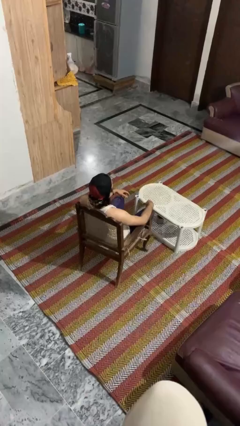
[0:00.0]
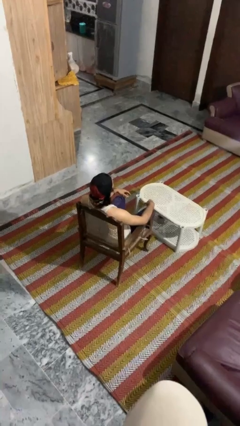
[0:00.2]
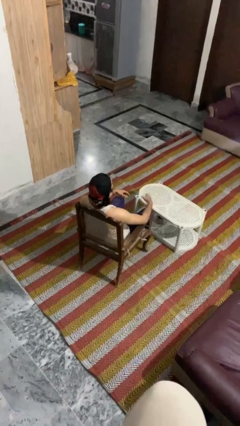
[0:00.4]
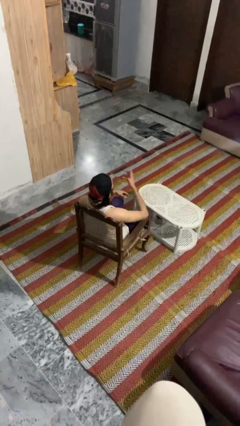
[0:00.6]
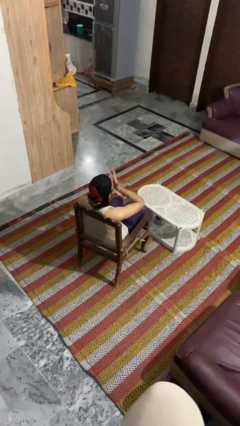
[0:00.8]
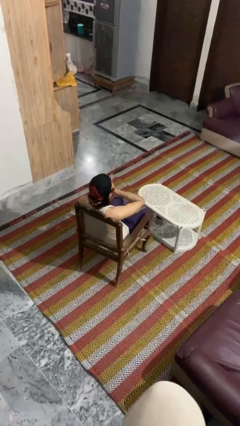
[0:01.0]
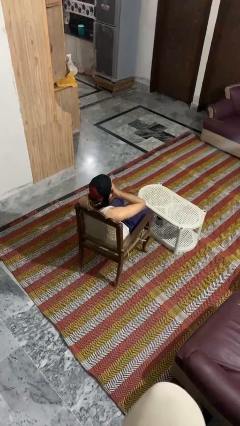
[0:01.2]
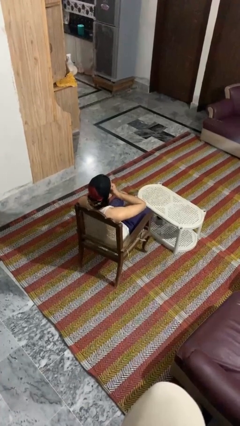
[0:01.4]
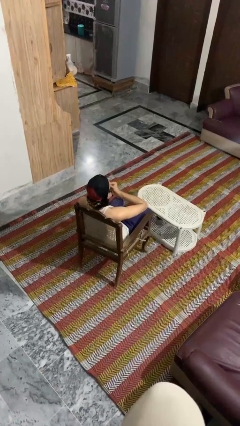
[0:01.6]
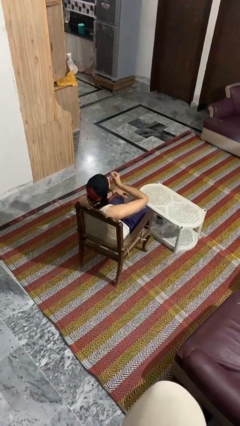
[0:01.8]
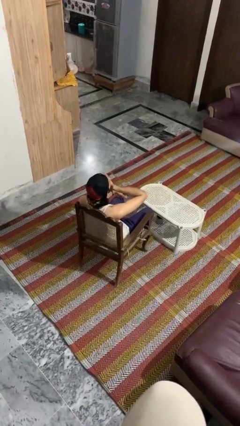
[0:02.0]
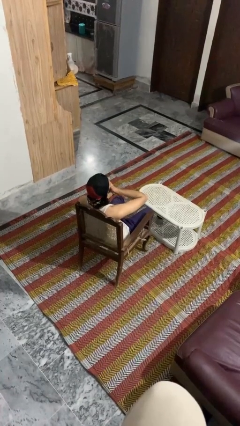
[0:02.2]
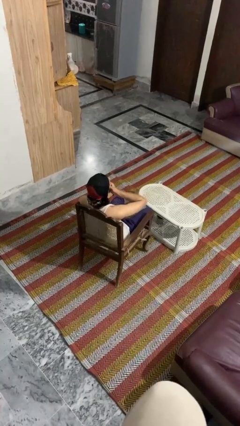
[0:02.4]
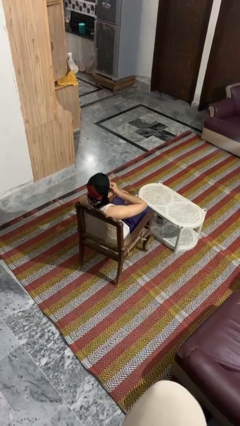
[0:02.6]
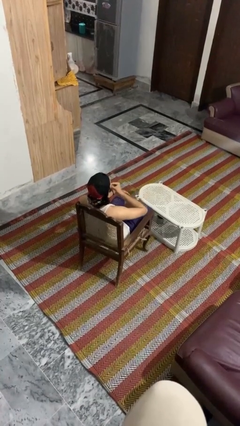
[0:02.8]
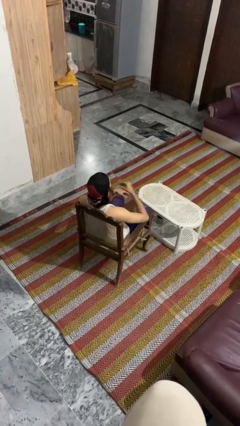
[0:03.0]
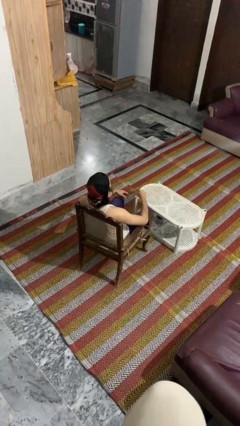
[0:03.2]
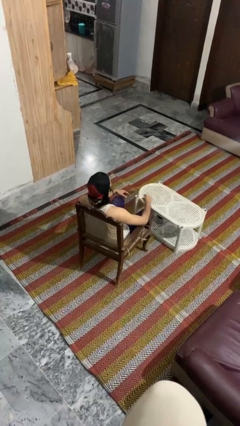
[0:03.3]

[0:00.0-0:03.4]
person strokes chin

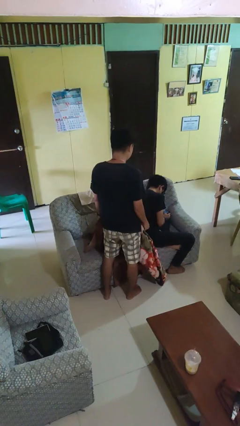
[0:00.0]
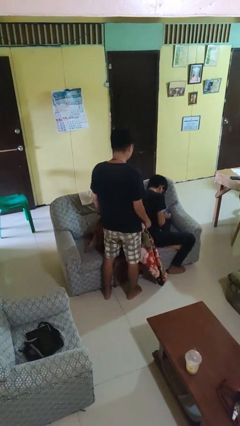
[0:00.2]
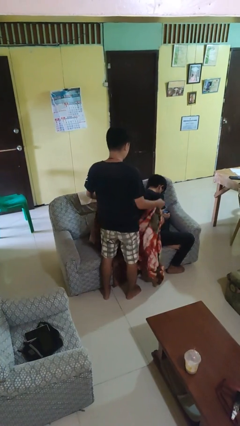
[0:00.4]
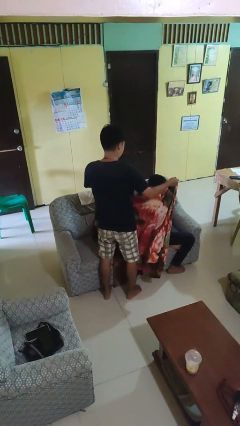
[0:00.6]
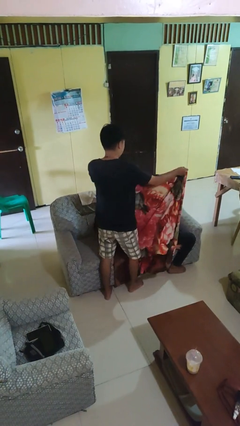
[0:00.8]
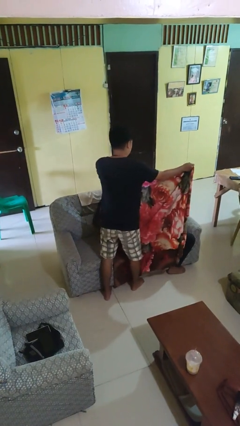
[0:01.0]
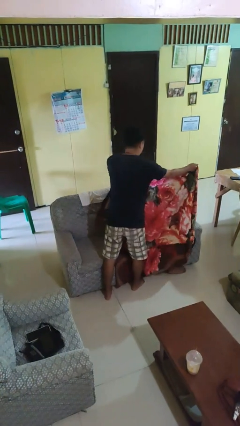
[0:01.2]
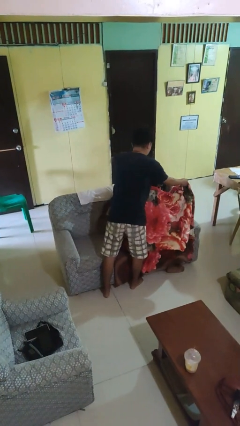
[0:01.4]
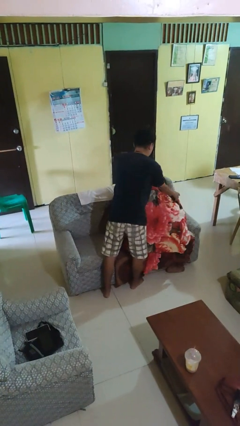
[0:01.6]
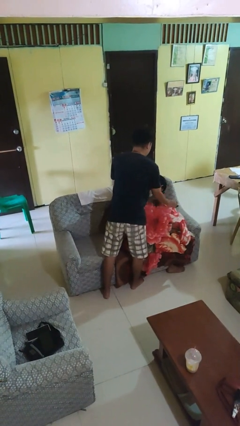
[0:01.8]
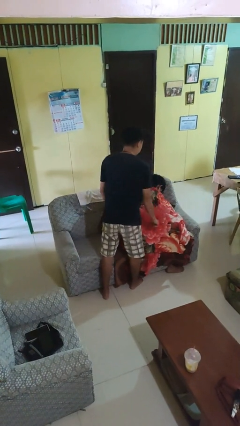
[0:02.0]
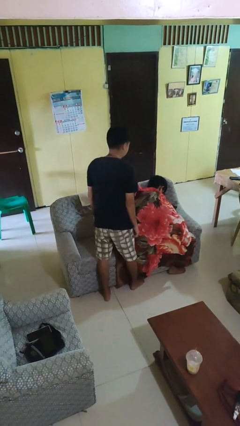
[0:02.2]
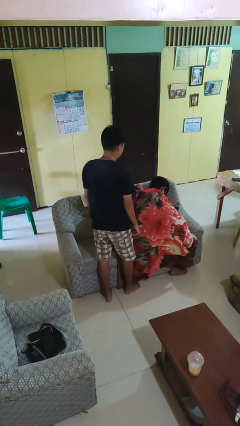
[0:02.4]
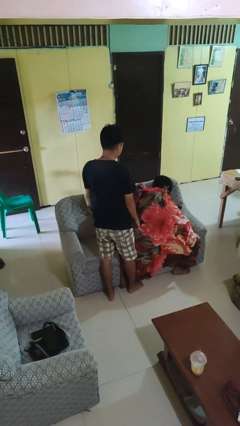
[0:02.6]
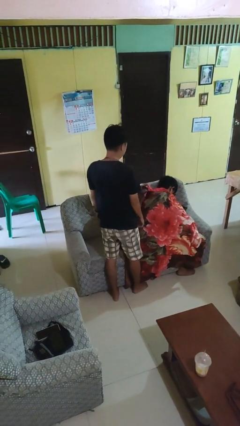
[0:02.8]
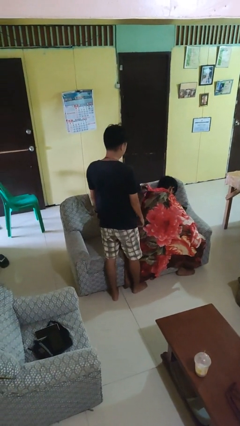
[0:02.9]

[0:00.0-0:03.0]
person covers friend with blanket

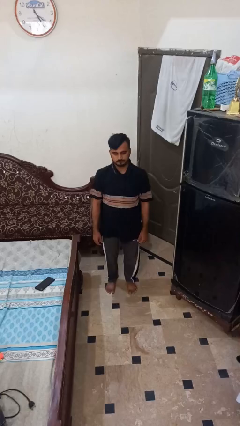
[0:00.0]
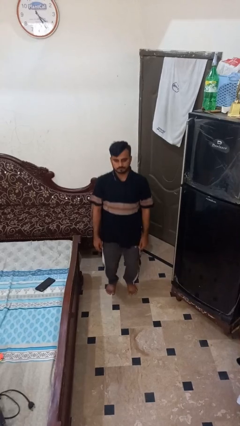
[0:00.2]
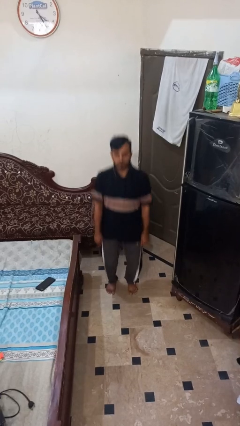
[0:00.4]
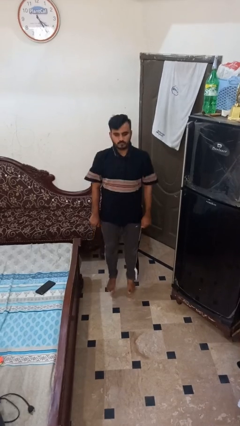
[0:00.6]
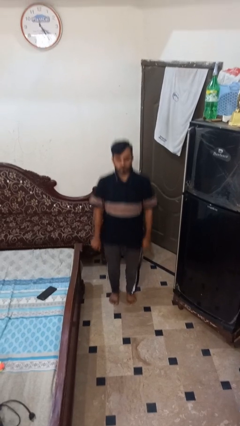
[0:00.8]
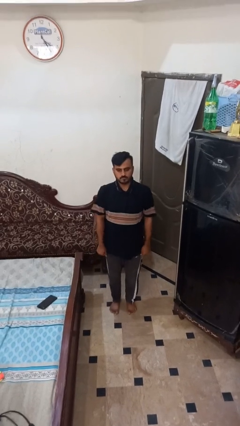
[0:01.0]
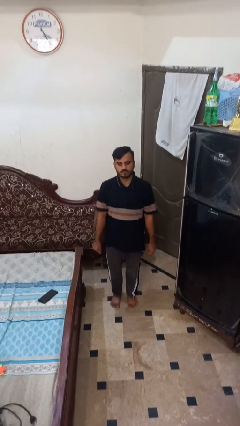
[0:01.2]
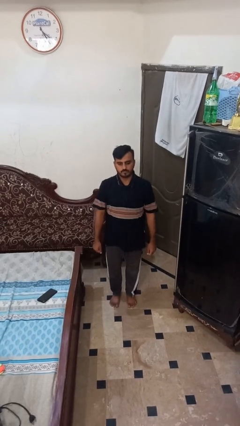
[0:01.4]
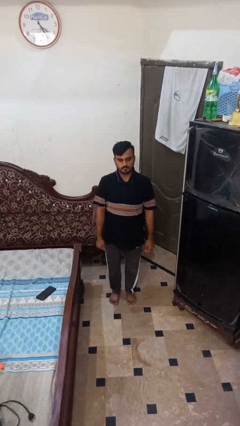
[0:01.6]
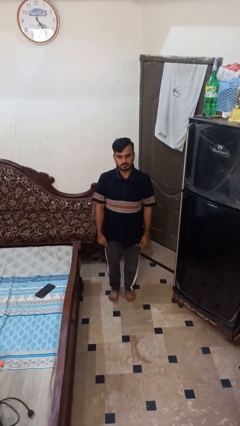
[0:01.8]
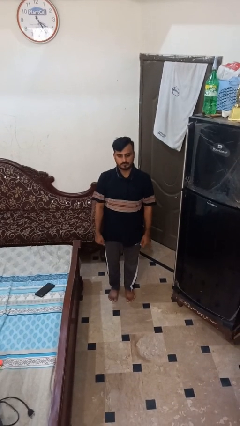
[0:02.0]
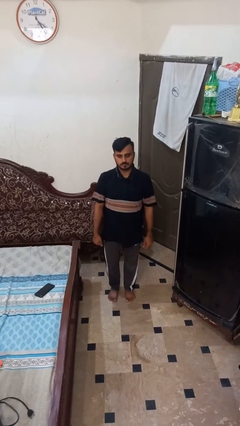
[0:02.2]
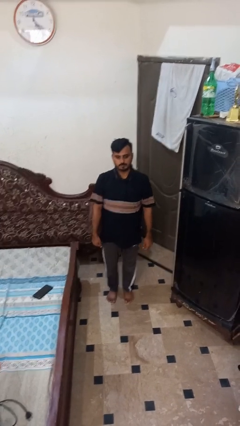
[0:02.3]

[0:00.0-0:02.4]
person jumps

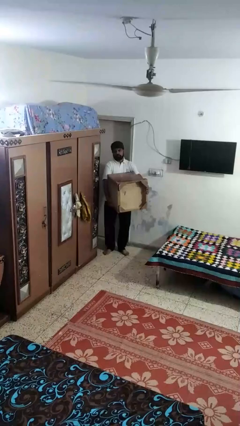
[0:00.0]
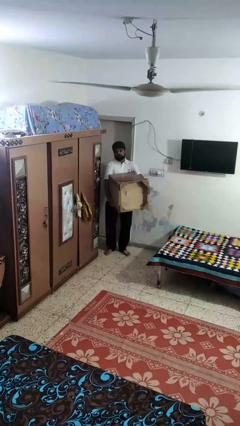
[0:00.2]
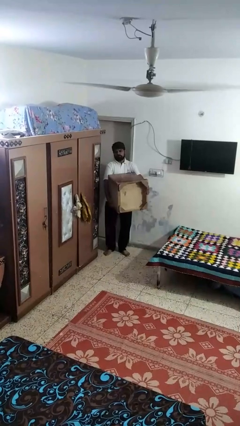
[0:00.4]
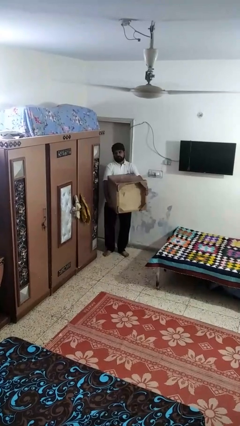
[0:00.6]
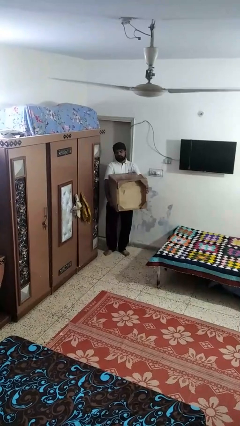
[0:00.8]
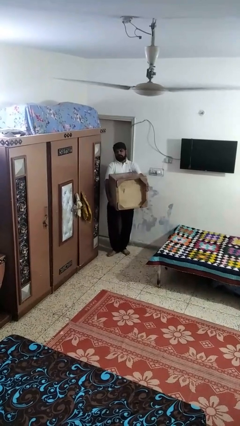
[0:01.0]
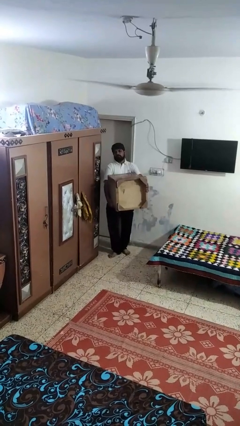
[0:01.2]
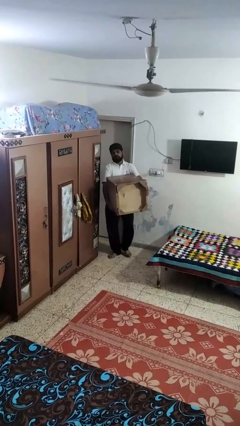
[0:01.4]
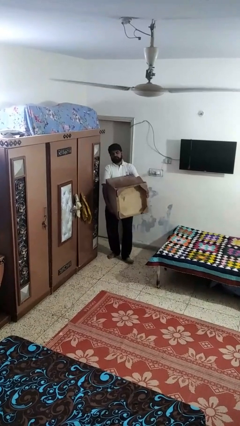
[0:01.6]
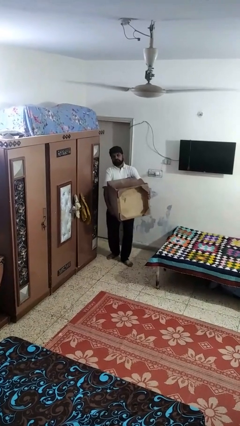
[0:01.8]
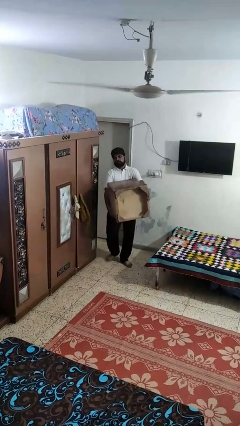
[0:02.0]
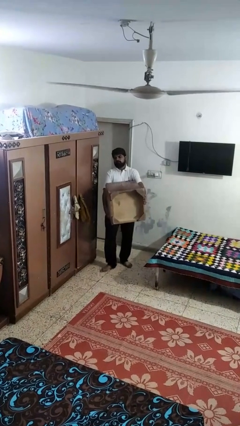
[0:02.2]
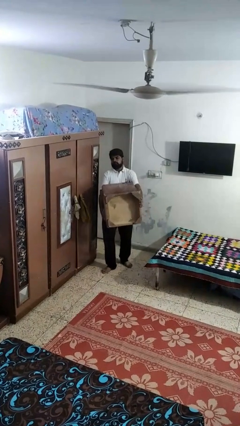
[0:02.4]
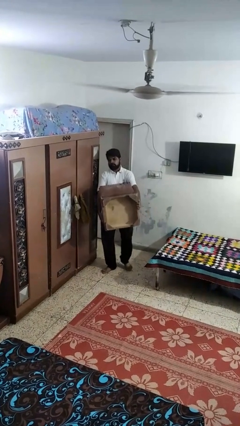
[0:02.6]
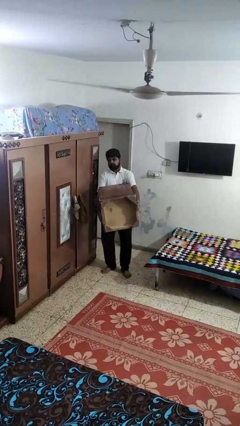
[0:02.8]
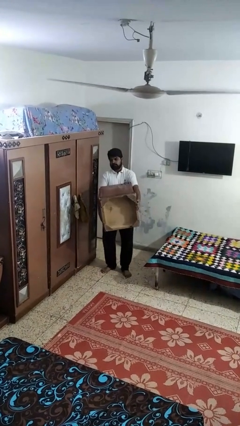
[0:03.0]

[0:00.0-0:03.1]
person carries furniture

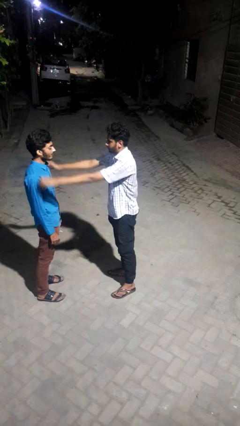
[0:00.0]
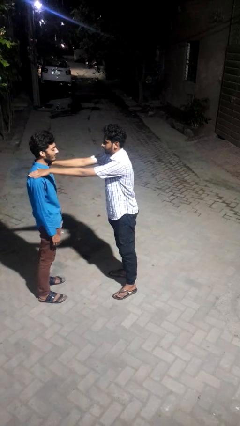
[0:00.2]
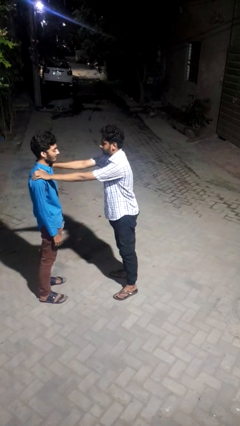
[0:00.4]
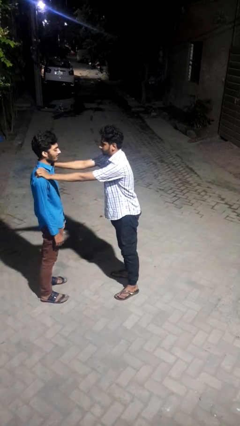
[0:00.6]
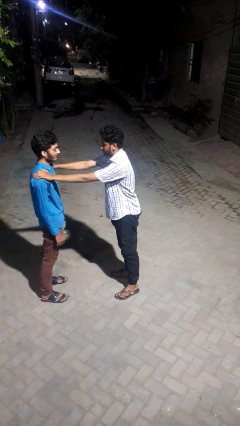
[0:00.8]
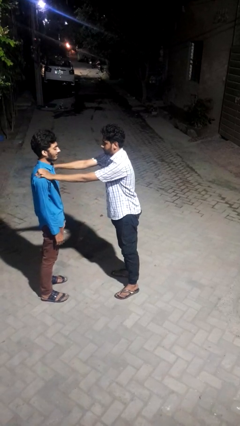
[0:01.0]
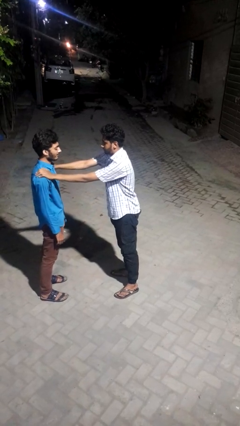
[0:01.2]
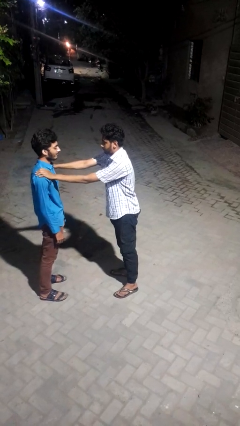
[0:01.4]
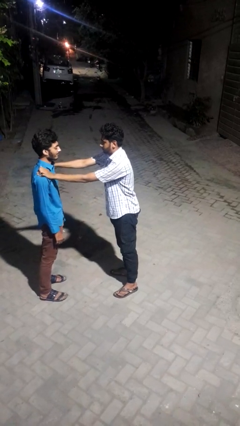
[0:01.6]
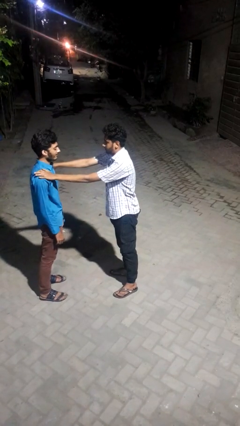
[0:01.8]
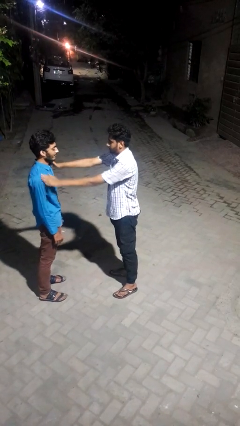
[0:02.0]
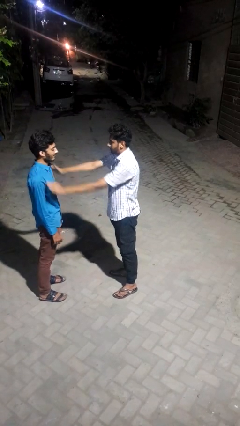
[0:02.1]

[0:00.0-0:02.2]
person pounds shoulders of person

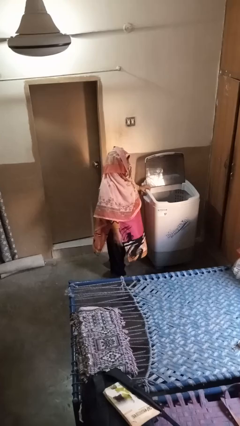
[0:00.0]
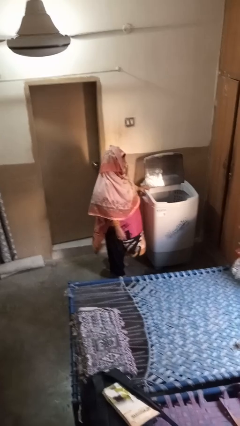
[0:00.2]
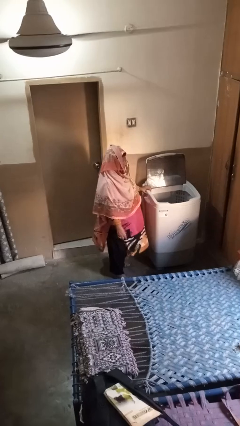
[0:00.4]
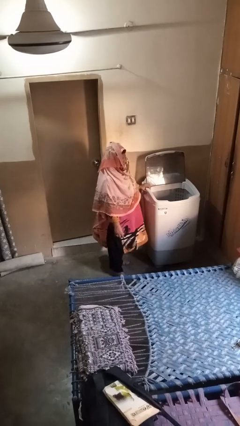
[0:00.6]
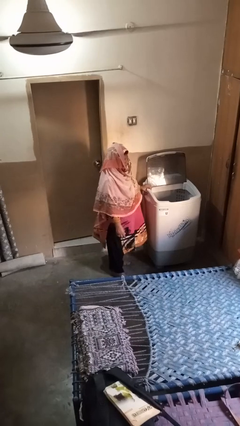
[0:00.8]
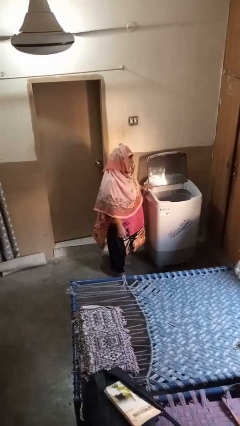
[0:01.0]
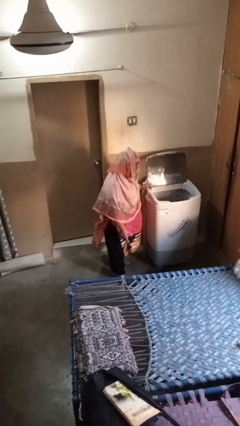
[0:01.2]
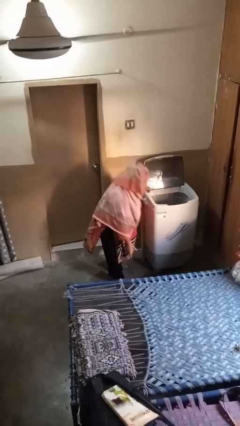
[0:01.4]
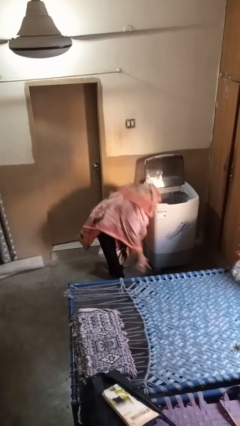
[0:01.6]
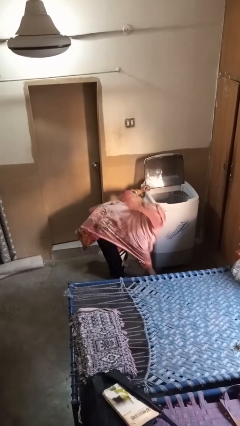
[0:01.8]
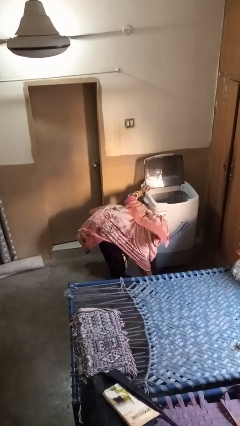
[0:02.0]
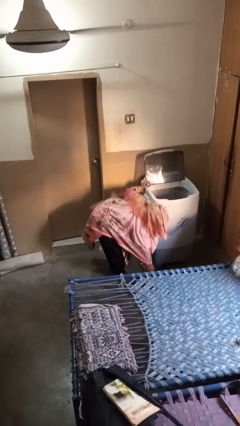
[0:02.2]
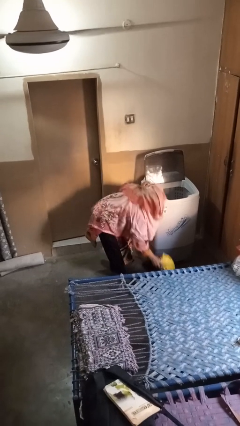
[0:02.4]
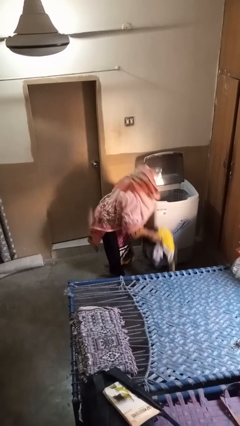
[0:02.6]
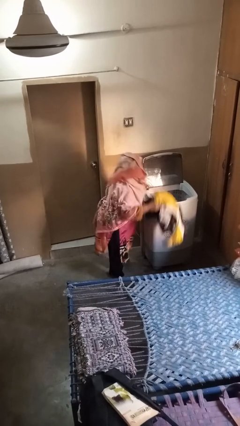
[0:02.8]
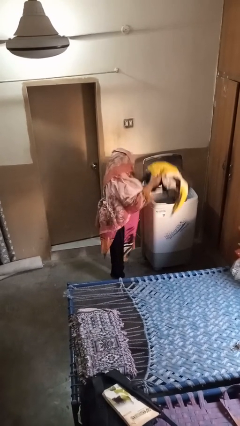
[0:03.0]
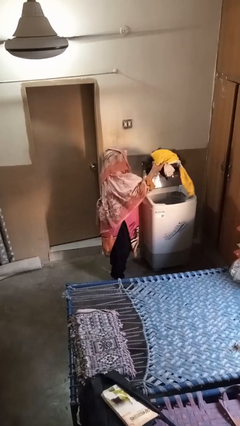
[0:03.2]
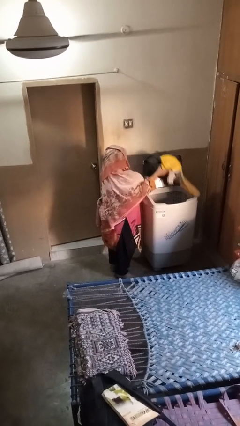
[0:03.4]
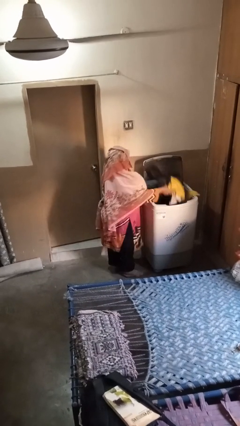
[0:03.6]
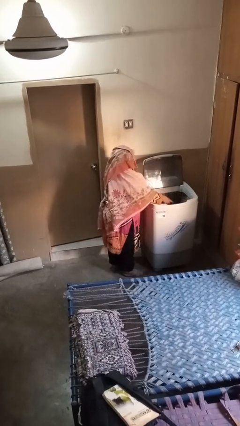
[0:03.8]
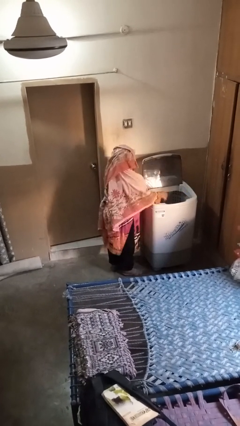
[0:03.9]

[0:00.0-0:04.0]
person loads clotheswasher
